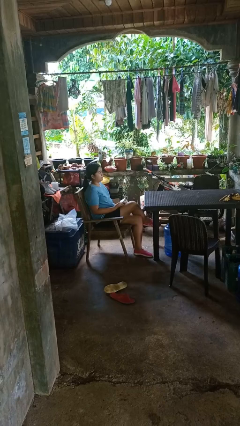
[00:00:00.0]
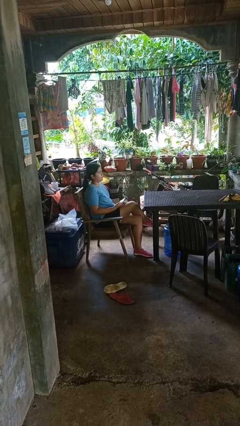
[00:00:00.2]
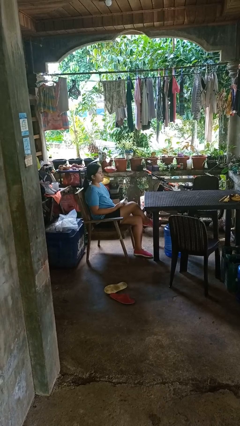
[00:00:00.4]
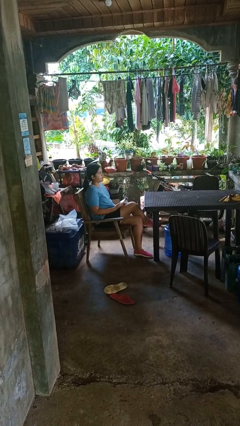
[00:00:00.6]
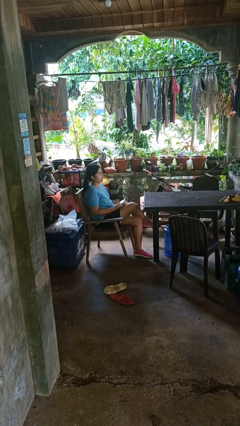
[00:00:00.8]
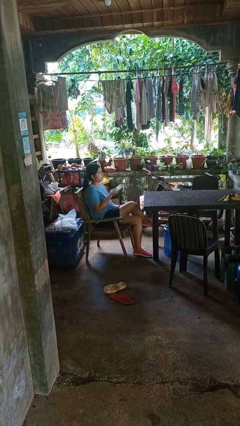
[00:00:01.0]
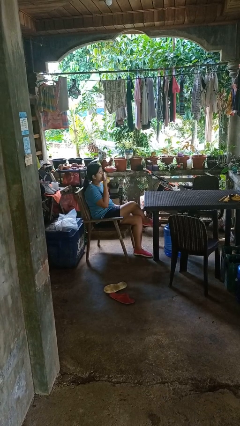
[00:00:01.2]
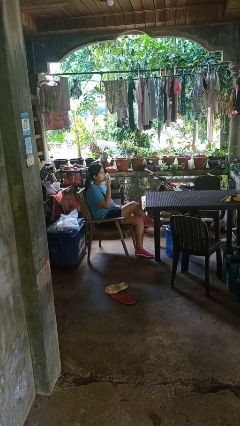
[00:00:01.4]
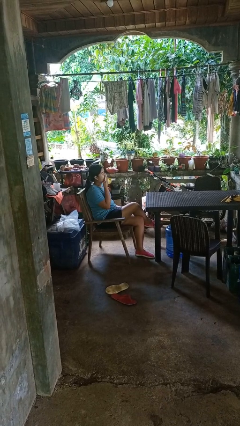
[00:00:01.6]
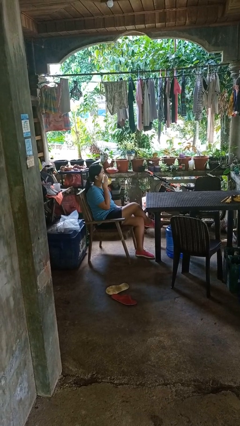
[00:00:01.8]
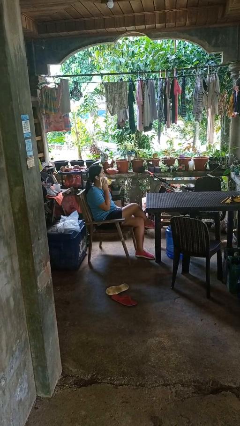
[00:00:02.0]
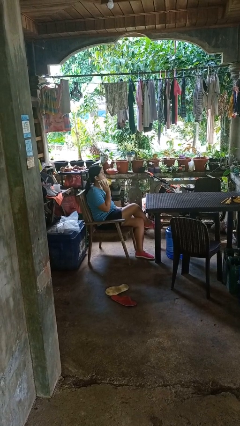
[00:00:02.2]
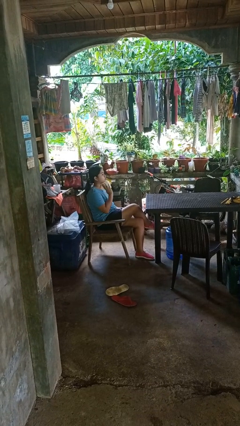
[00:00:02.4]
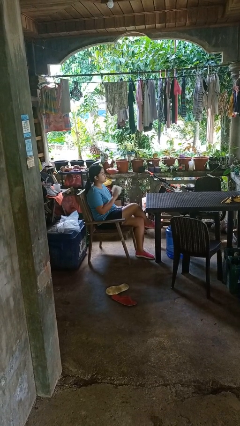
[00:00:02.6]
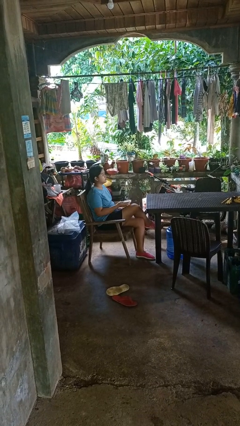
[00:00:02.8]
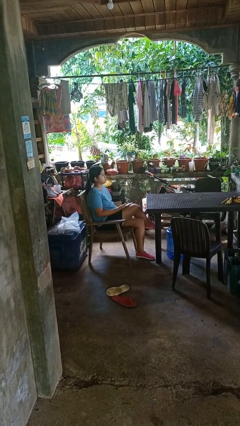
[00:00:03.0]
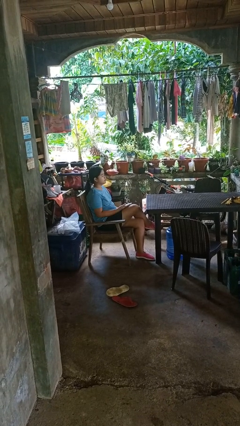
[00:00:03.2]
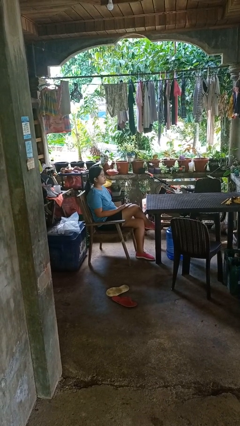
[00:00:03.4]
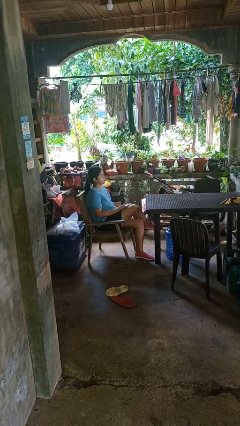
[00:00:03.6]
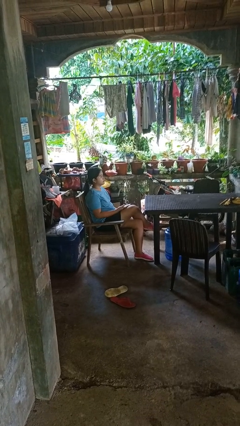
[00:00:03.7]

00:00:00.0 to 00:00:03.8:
person wipes mouth with napkin

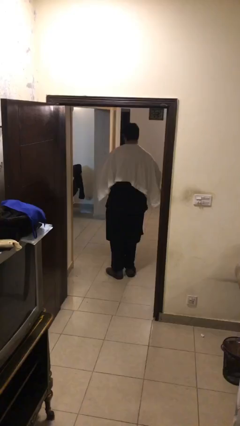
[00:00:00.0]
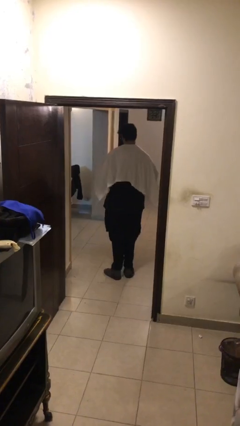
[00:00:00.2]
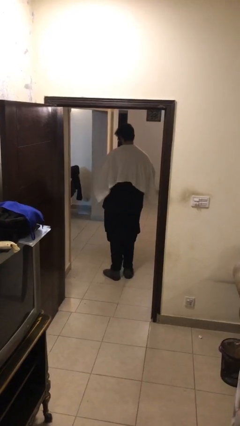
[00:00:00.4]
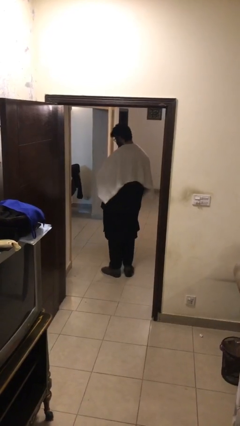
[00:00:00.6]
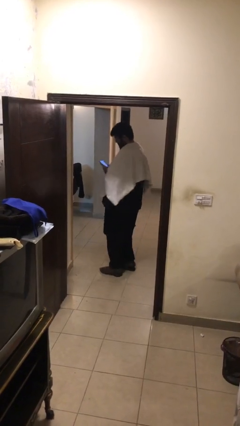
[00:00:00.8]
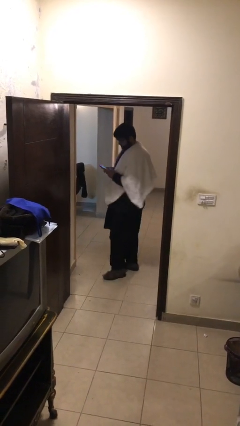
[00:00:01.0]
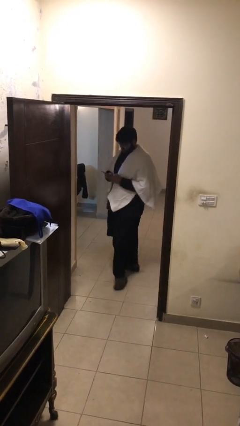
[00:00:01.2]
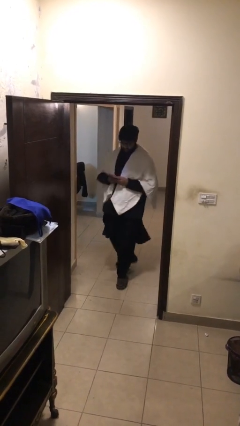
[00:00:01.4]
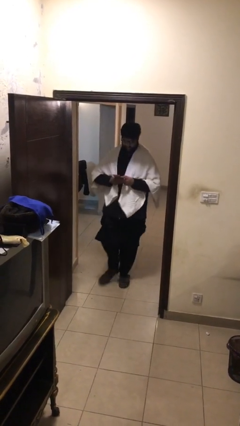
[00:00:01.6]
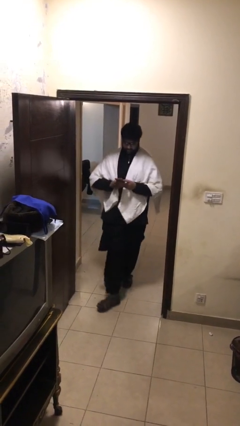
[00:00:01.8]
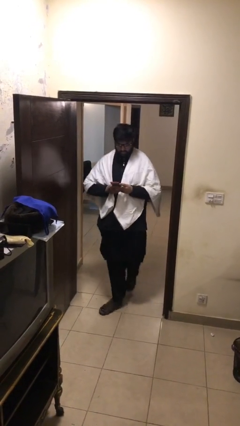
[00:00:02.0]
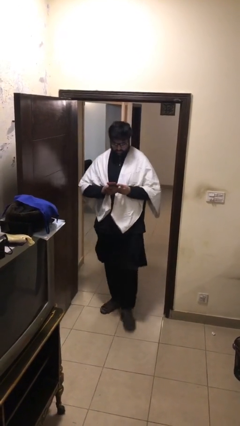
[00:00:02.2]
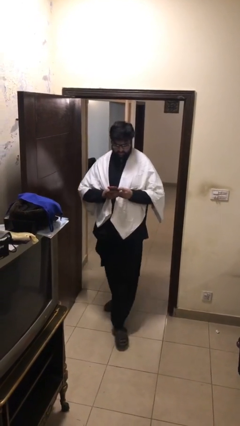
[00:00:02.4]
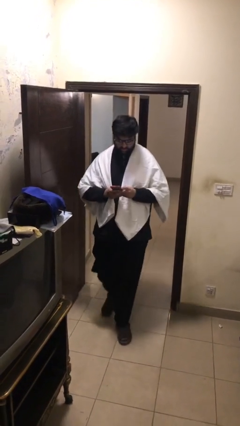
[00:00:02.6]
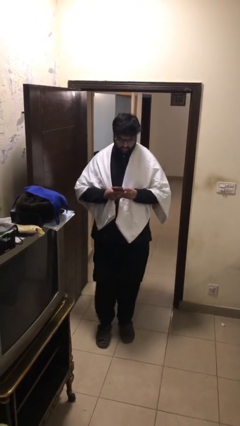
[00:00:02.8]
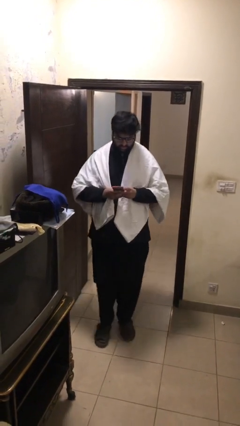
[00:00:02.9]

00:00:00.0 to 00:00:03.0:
person enters scene through structure

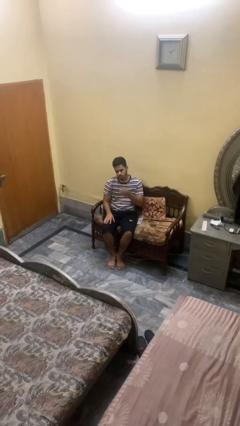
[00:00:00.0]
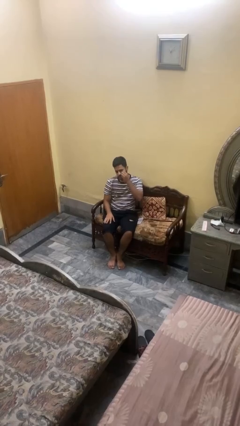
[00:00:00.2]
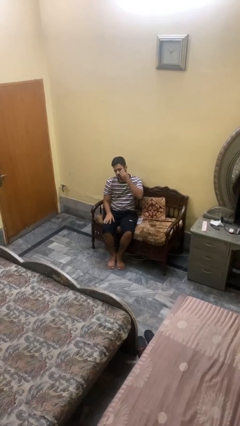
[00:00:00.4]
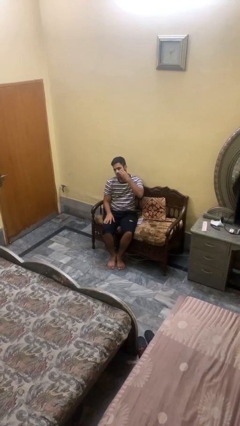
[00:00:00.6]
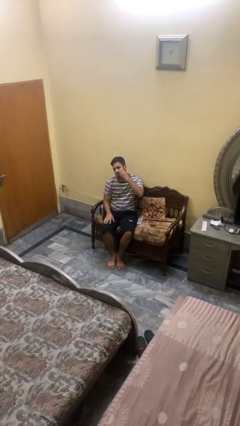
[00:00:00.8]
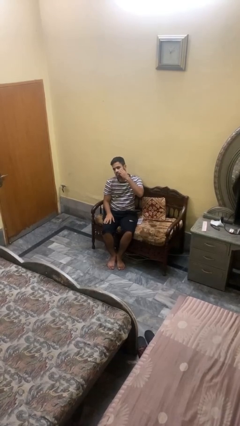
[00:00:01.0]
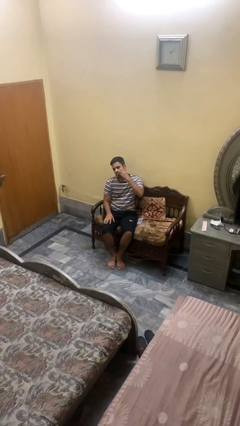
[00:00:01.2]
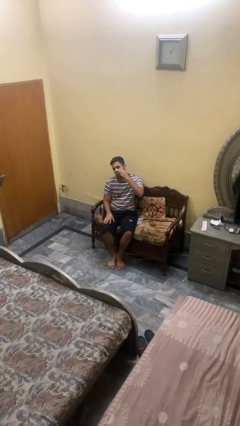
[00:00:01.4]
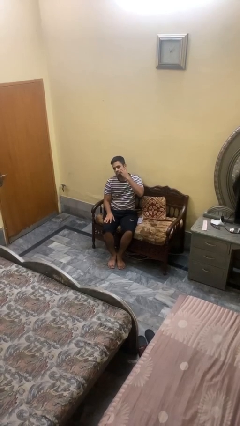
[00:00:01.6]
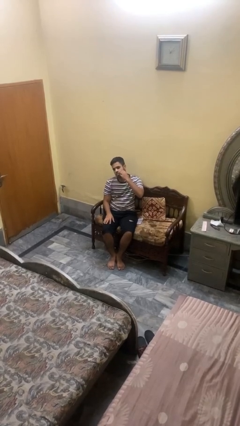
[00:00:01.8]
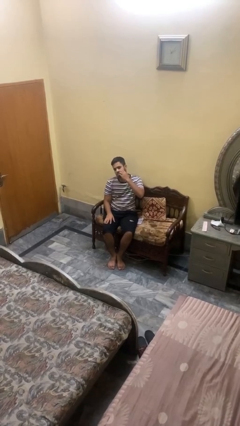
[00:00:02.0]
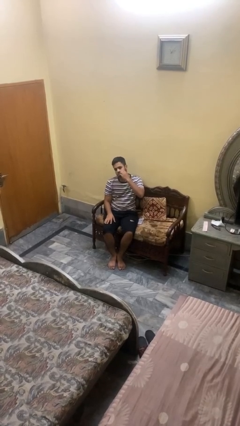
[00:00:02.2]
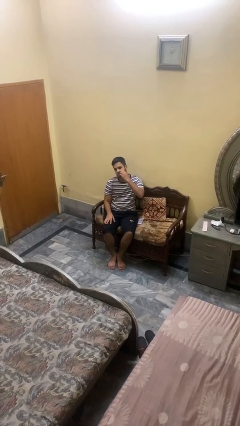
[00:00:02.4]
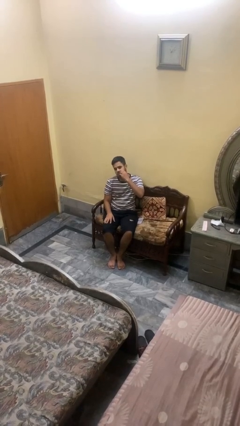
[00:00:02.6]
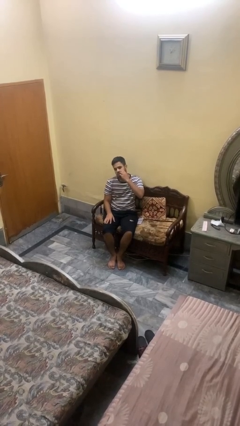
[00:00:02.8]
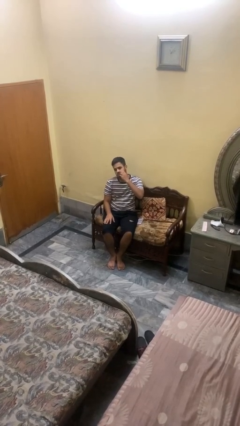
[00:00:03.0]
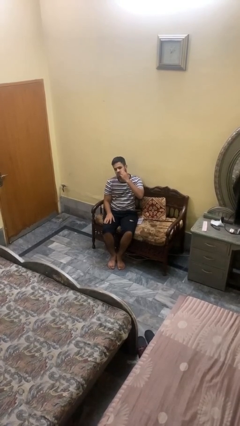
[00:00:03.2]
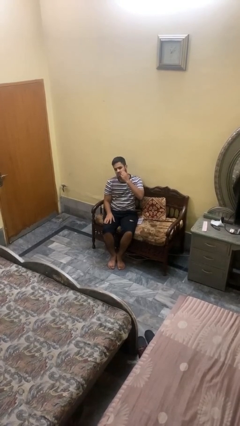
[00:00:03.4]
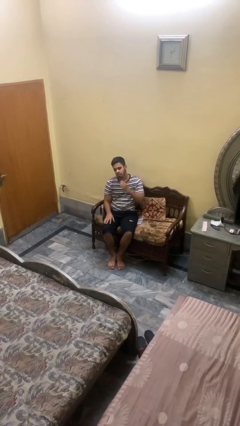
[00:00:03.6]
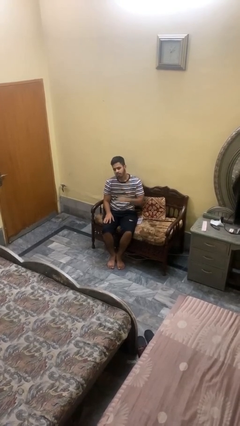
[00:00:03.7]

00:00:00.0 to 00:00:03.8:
person scratches face

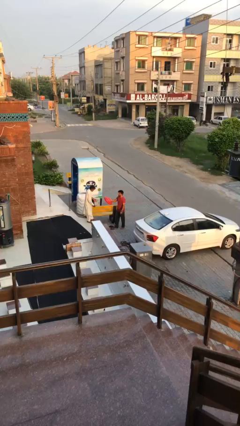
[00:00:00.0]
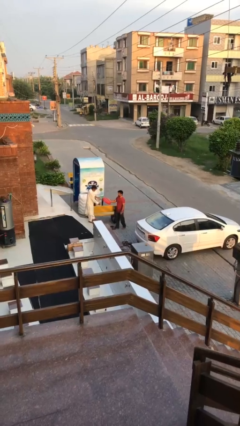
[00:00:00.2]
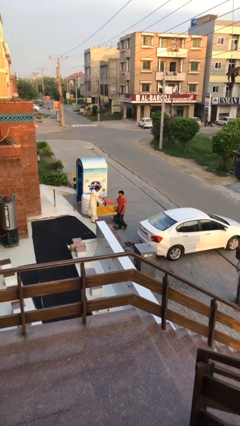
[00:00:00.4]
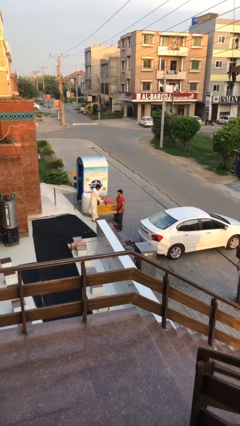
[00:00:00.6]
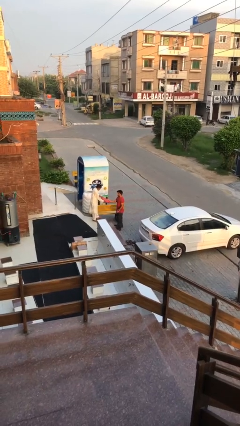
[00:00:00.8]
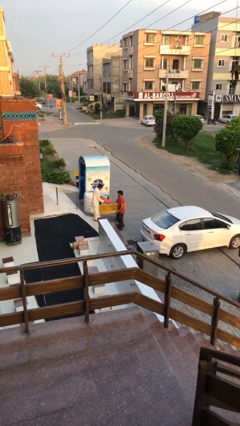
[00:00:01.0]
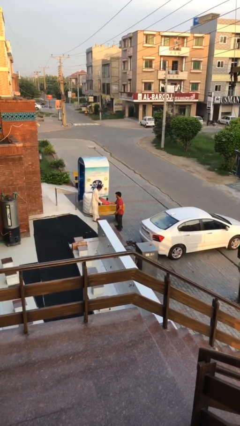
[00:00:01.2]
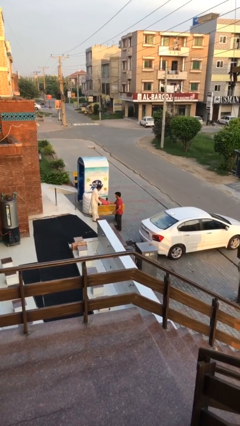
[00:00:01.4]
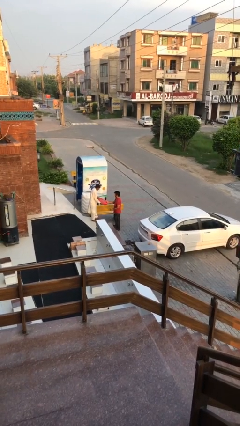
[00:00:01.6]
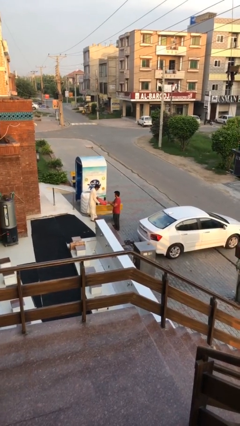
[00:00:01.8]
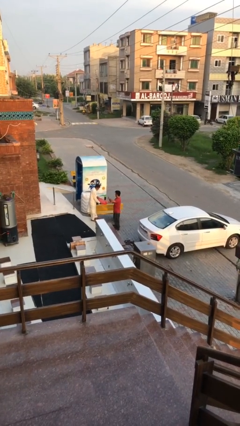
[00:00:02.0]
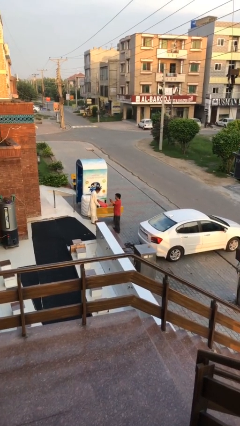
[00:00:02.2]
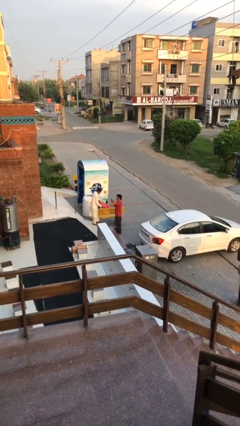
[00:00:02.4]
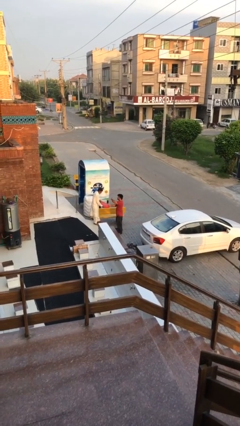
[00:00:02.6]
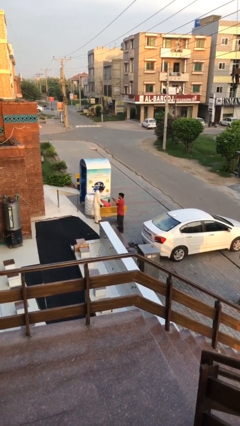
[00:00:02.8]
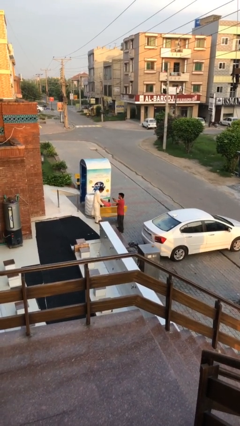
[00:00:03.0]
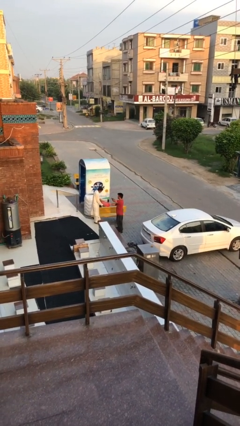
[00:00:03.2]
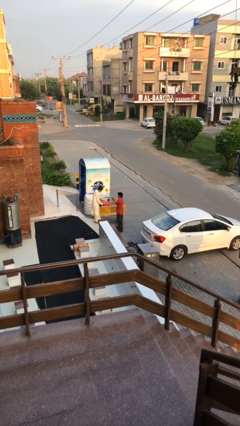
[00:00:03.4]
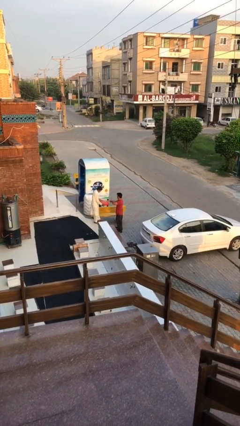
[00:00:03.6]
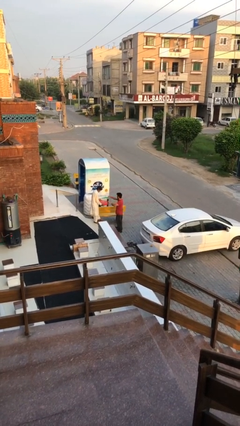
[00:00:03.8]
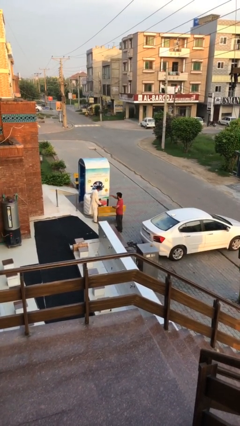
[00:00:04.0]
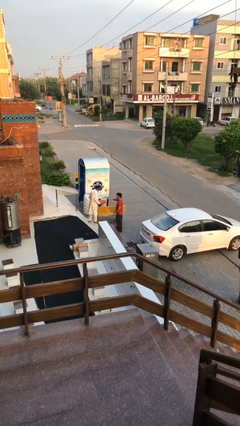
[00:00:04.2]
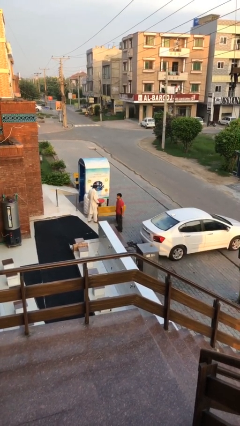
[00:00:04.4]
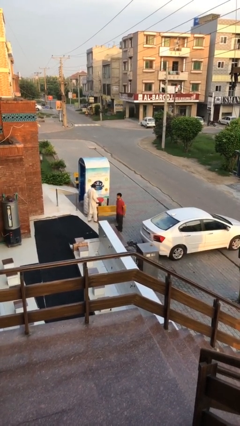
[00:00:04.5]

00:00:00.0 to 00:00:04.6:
person transfers object to person

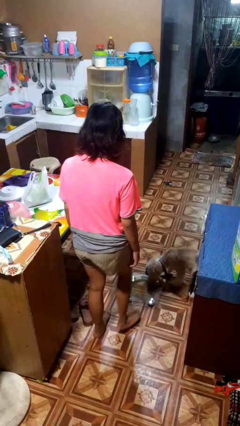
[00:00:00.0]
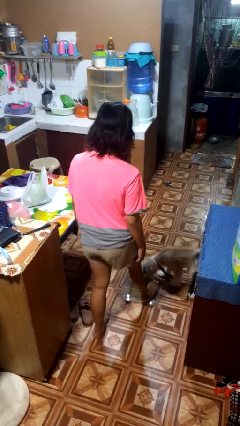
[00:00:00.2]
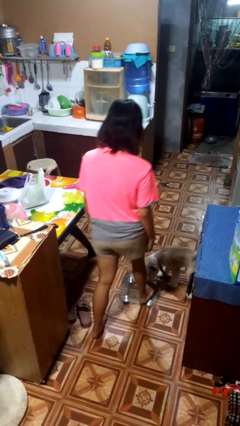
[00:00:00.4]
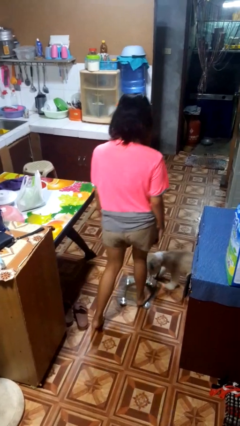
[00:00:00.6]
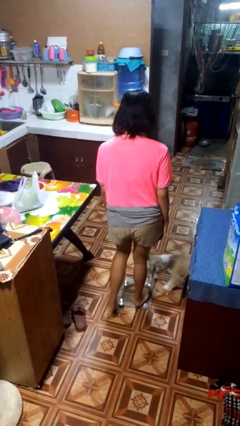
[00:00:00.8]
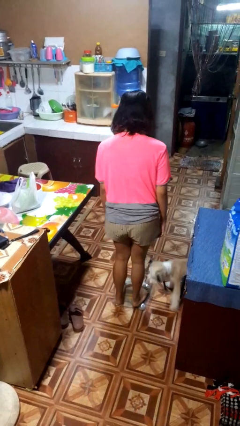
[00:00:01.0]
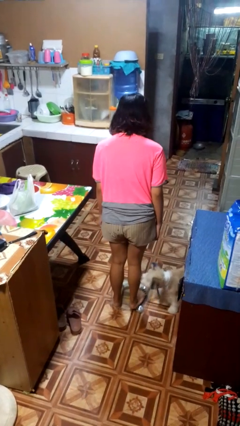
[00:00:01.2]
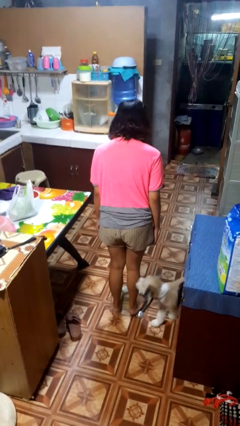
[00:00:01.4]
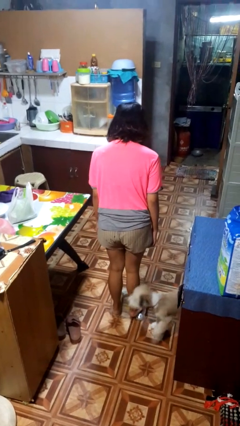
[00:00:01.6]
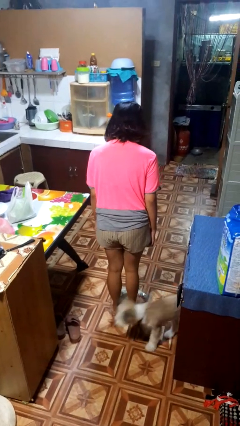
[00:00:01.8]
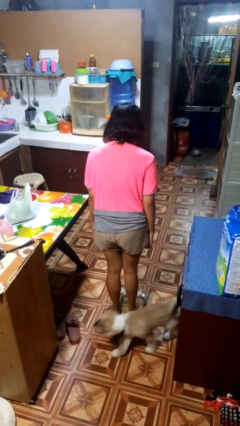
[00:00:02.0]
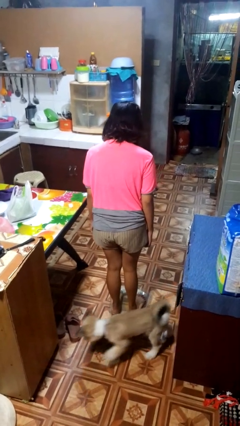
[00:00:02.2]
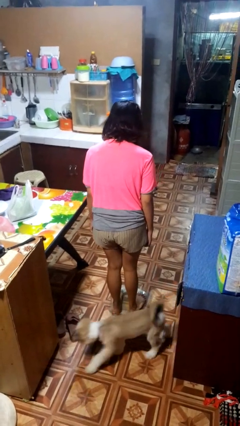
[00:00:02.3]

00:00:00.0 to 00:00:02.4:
person uses bodyweight scale
